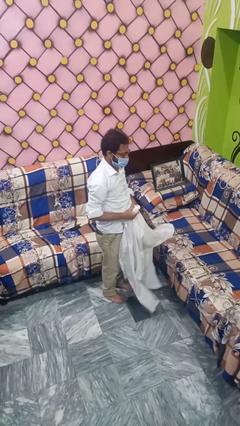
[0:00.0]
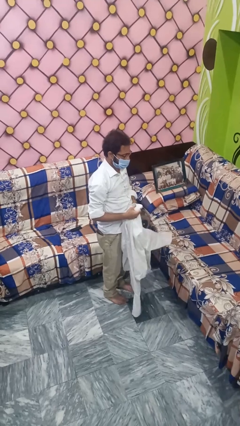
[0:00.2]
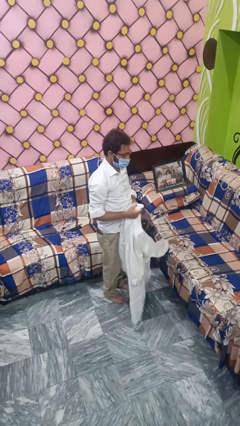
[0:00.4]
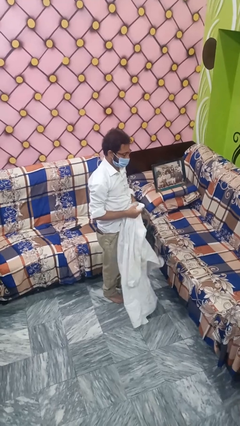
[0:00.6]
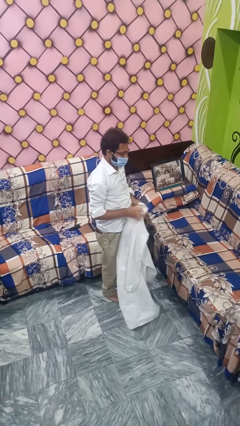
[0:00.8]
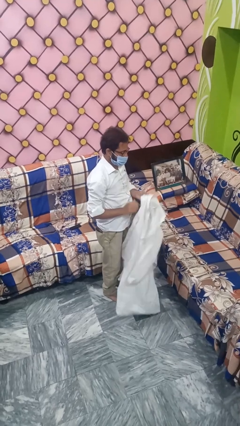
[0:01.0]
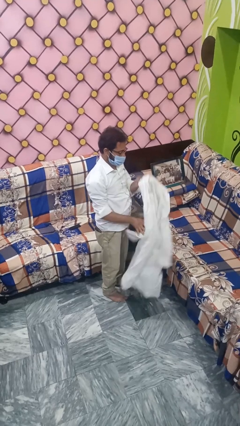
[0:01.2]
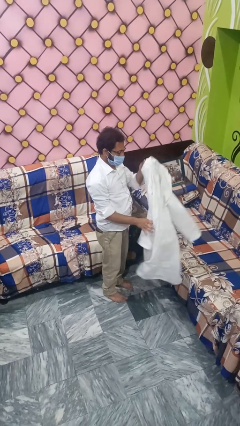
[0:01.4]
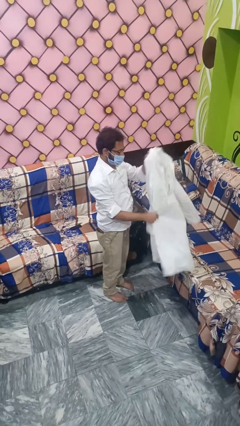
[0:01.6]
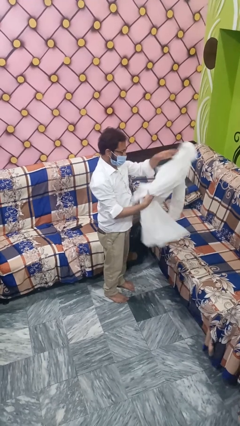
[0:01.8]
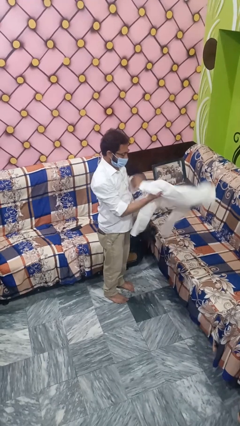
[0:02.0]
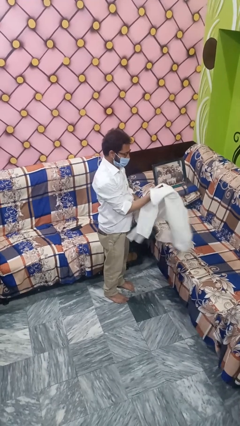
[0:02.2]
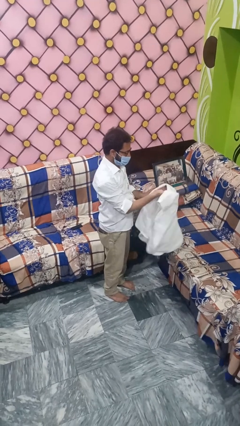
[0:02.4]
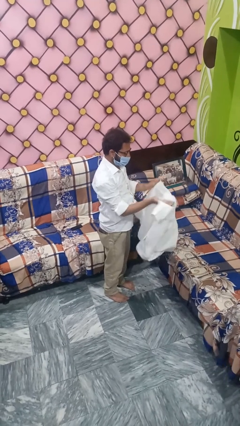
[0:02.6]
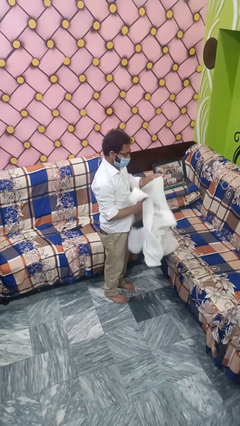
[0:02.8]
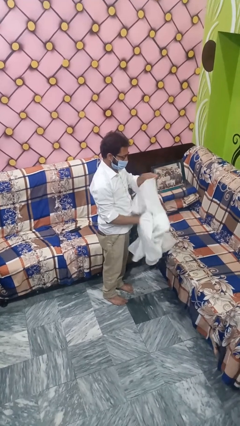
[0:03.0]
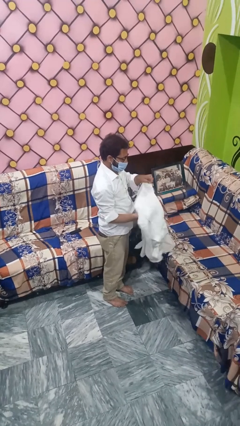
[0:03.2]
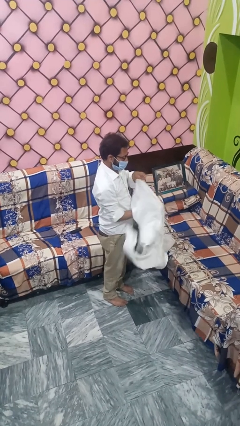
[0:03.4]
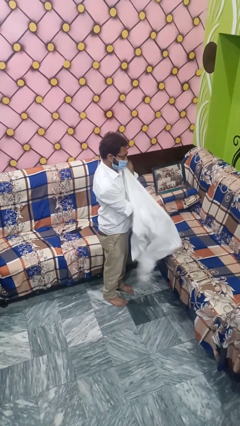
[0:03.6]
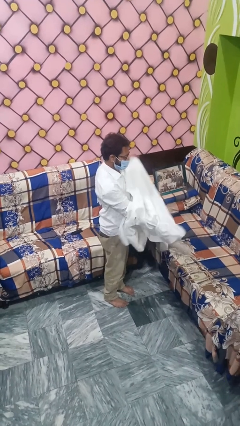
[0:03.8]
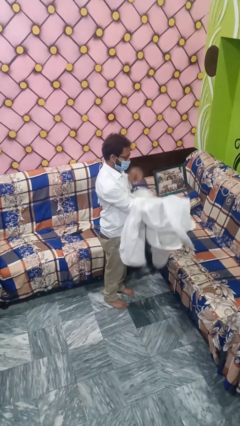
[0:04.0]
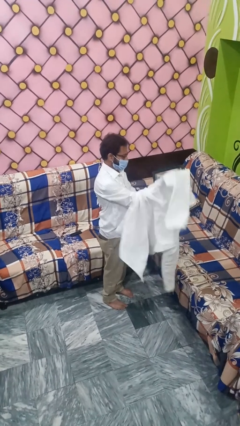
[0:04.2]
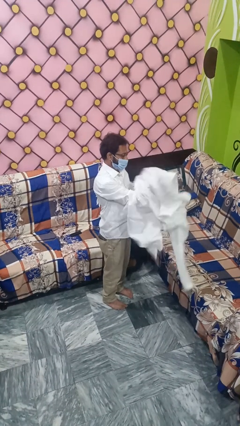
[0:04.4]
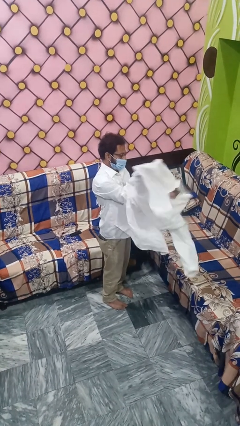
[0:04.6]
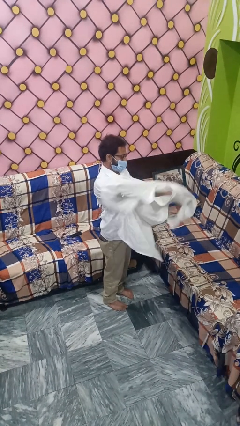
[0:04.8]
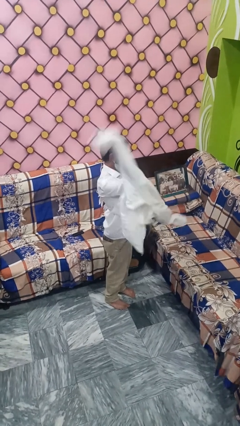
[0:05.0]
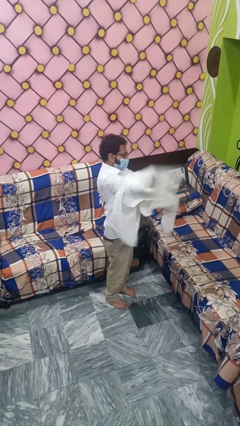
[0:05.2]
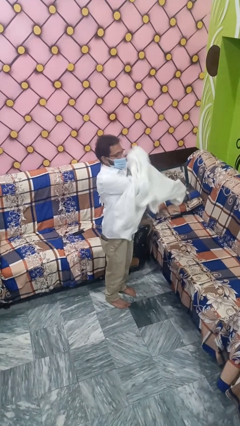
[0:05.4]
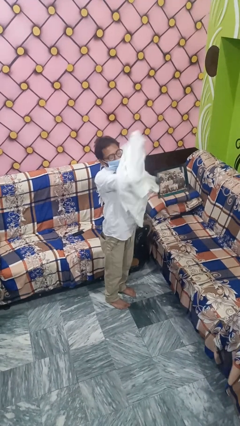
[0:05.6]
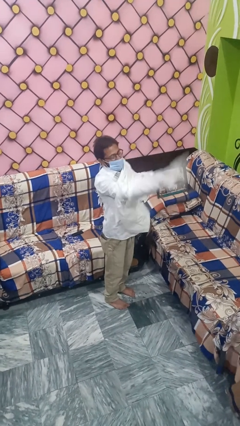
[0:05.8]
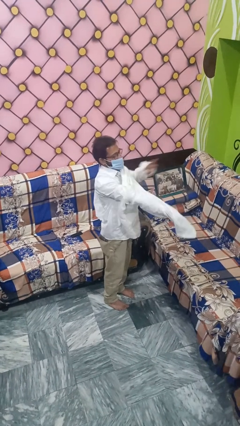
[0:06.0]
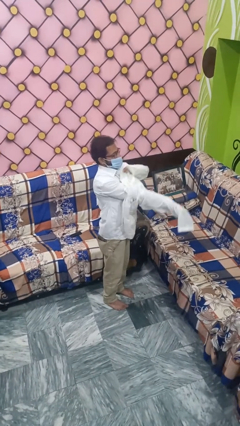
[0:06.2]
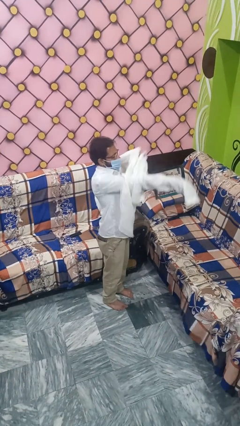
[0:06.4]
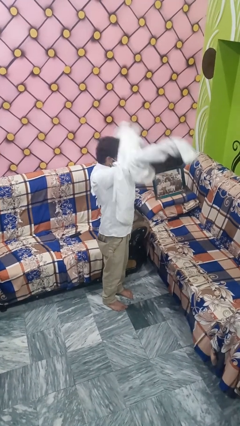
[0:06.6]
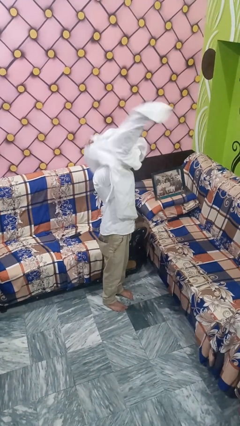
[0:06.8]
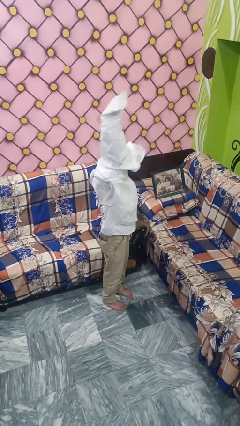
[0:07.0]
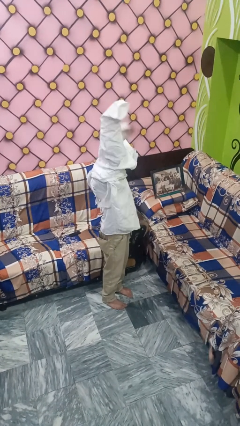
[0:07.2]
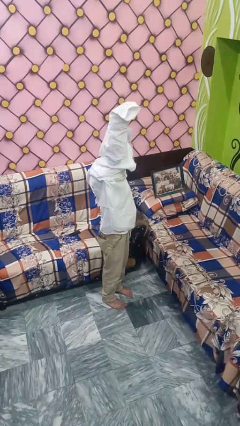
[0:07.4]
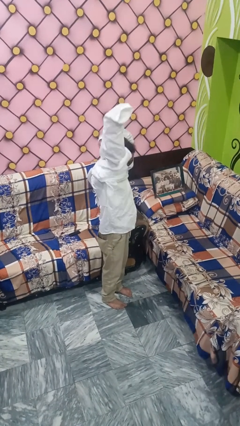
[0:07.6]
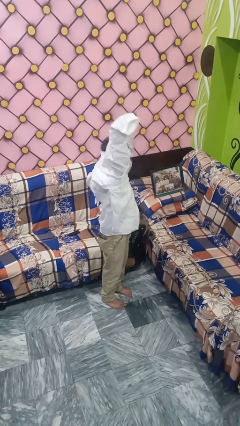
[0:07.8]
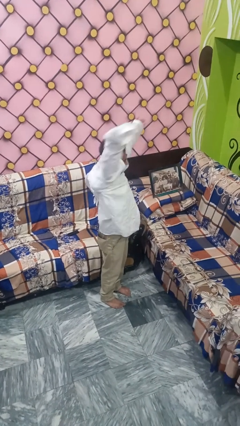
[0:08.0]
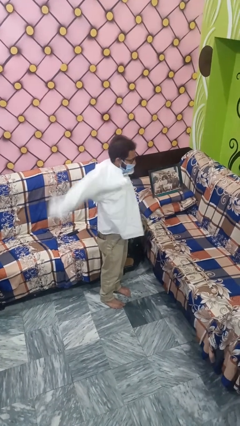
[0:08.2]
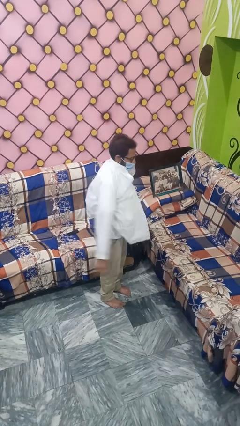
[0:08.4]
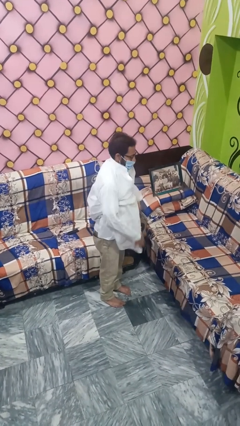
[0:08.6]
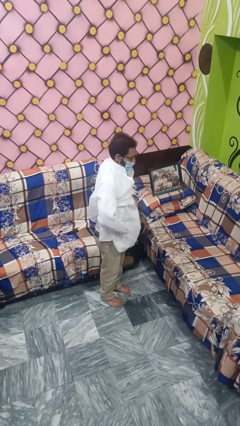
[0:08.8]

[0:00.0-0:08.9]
person puts on shirt

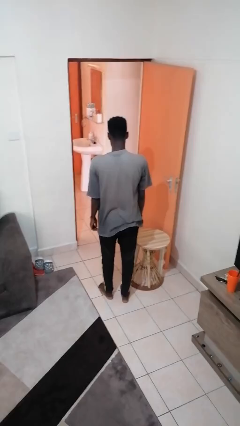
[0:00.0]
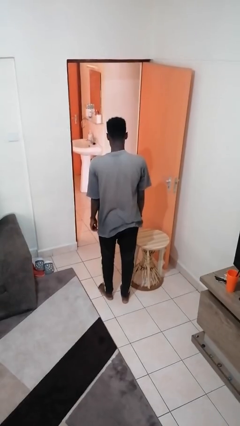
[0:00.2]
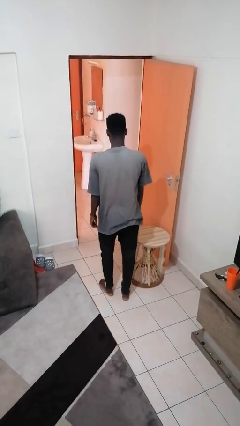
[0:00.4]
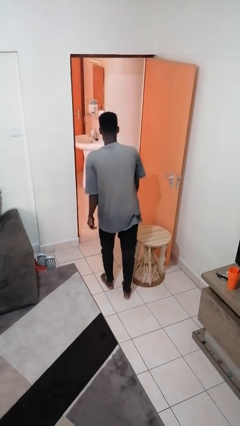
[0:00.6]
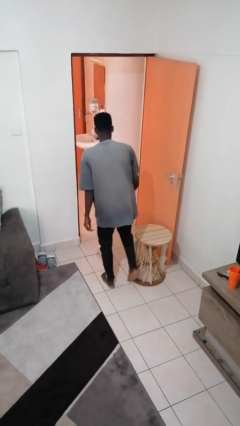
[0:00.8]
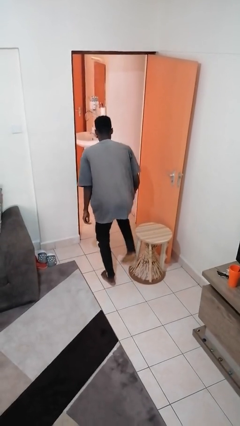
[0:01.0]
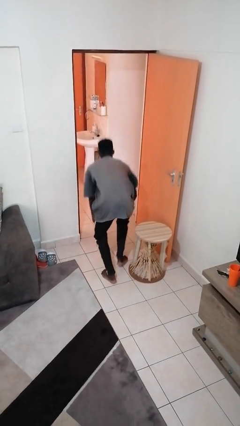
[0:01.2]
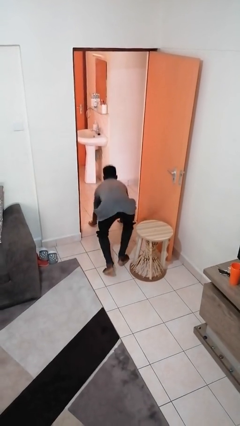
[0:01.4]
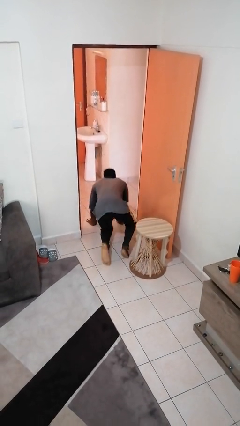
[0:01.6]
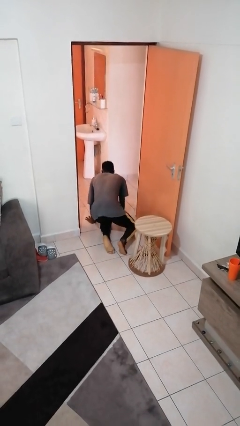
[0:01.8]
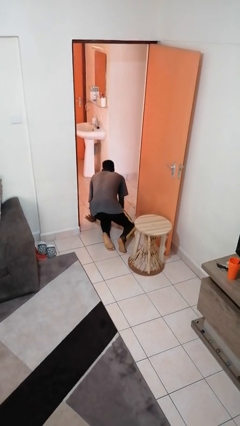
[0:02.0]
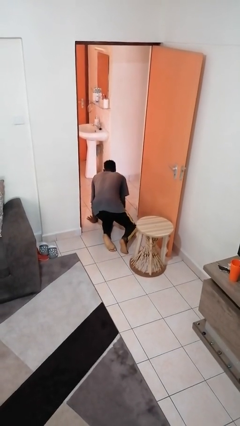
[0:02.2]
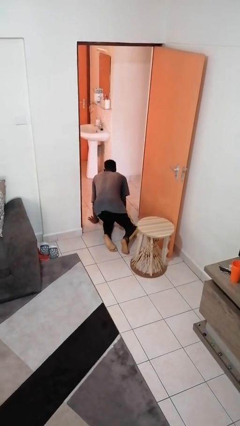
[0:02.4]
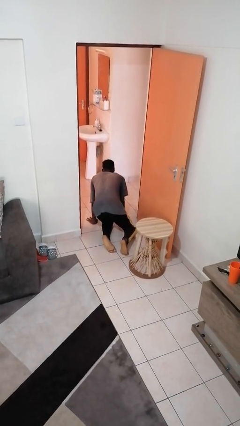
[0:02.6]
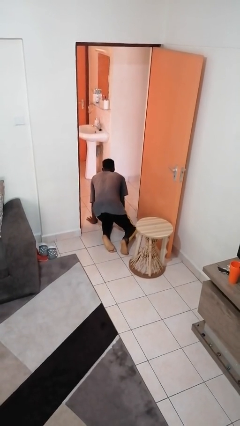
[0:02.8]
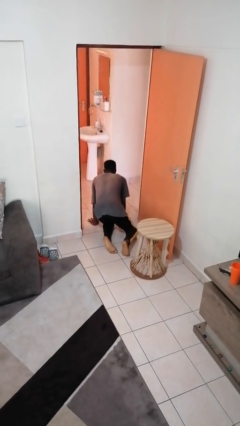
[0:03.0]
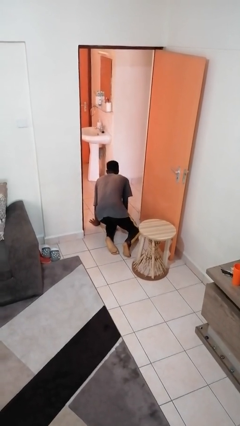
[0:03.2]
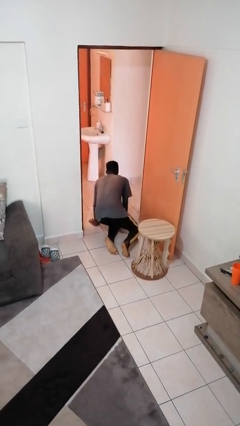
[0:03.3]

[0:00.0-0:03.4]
person trips on object on floor

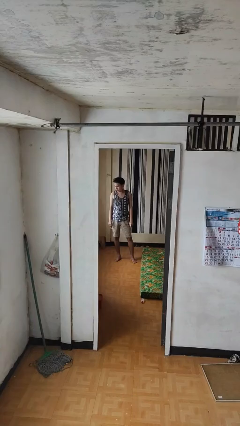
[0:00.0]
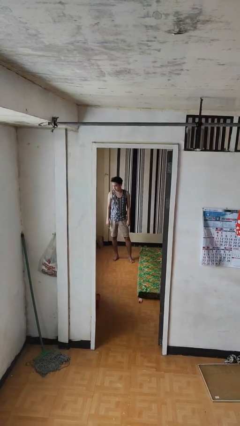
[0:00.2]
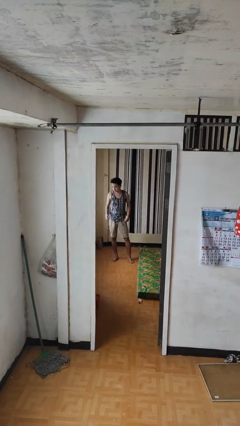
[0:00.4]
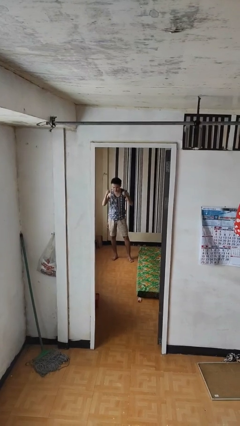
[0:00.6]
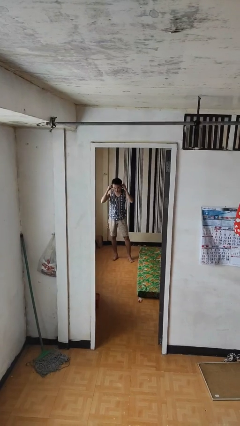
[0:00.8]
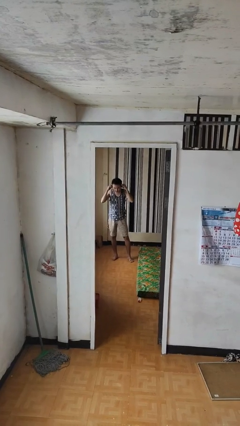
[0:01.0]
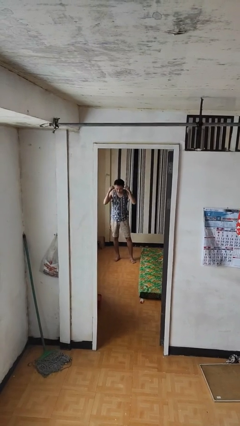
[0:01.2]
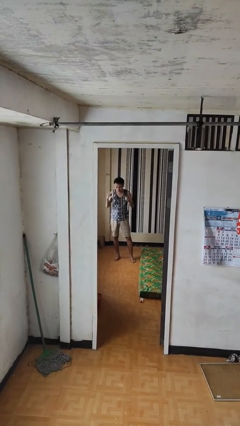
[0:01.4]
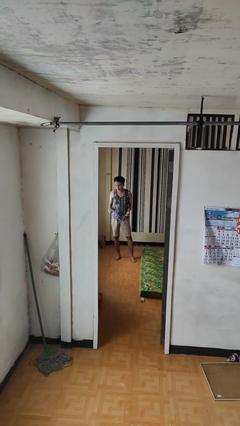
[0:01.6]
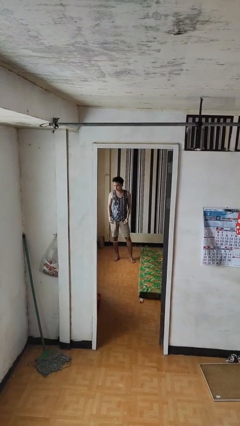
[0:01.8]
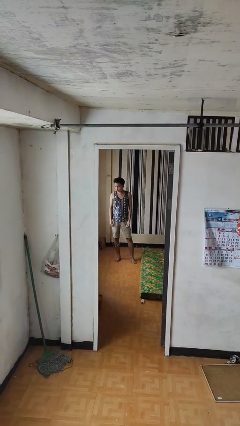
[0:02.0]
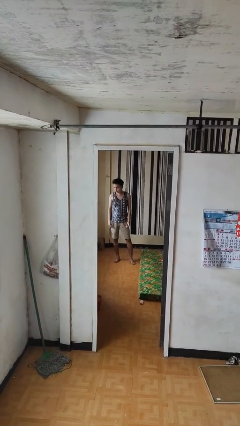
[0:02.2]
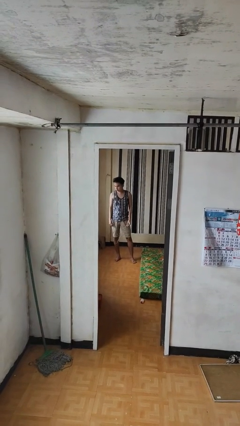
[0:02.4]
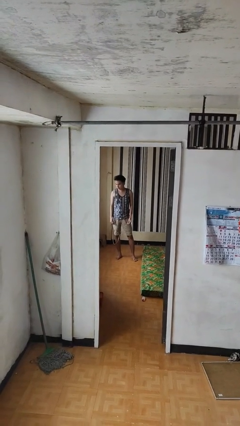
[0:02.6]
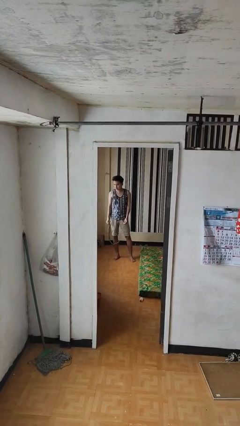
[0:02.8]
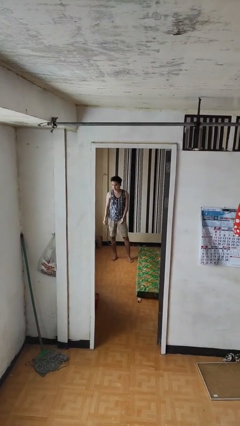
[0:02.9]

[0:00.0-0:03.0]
person takes off headphones

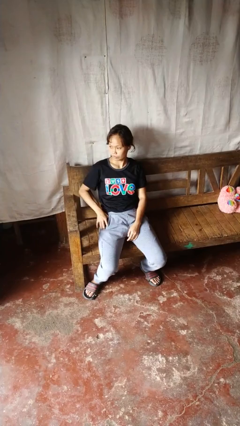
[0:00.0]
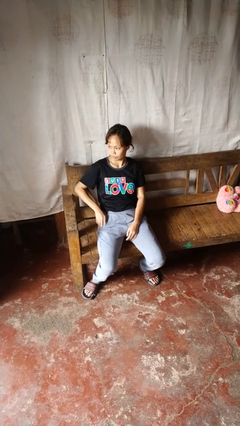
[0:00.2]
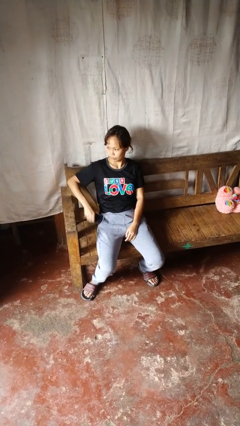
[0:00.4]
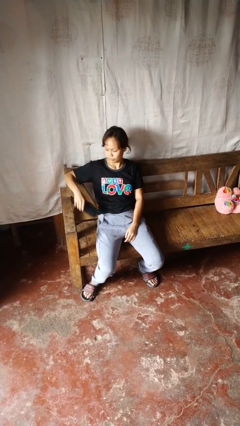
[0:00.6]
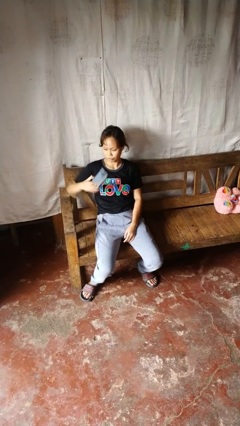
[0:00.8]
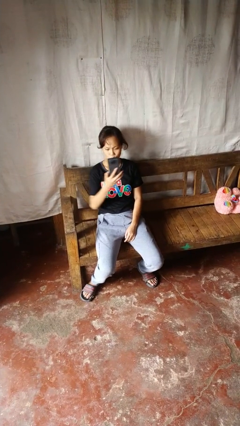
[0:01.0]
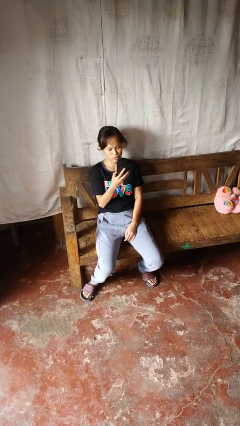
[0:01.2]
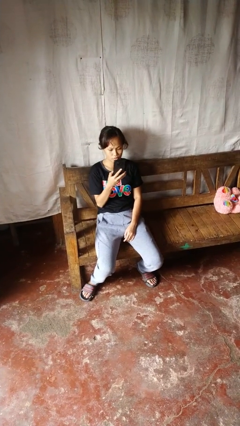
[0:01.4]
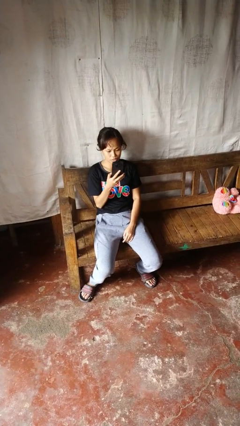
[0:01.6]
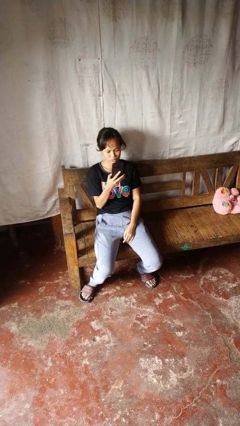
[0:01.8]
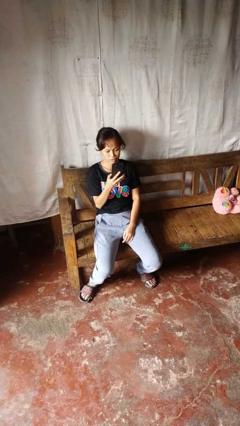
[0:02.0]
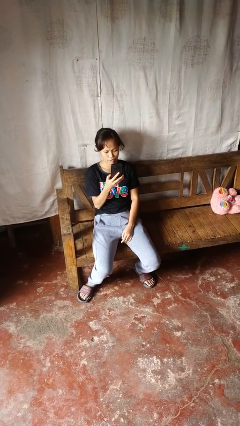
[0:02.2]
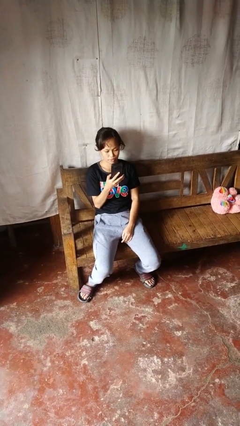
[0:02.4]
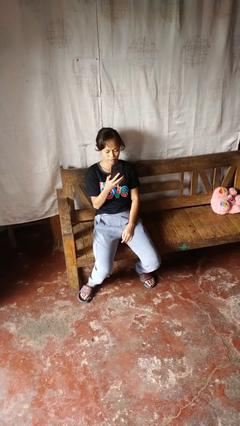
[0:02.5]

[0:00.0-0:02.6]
person takes phone from pocket

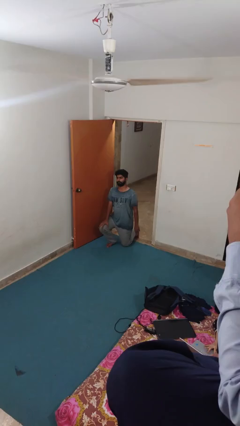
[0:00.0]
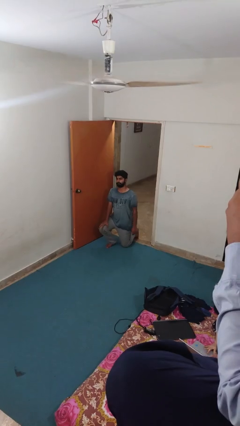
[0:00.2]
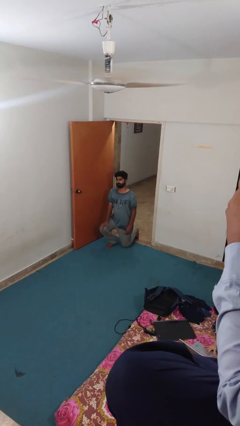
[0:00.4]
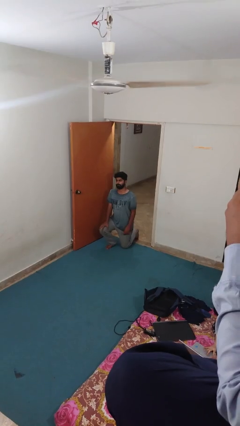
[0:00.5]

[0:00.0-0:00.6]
person kneels
